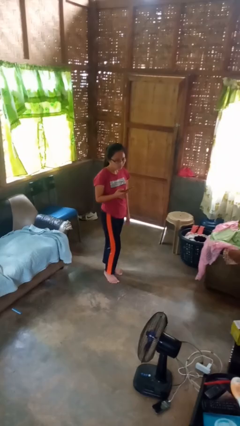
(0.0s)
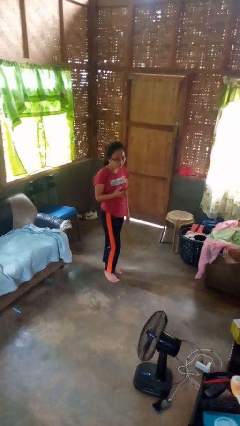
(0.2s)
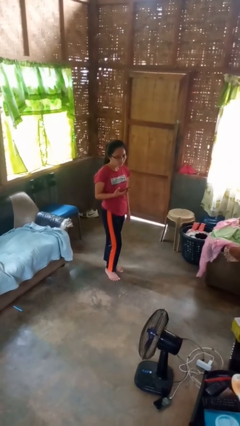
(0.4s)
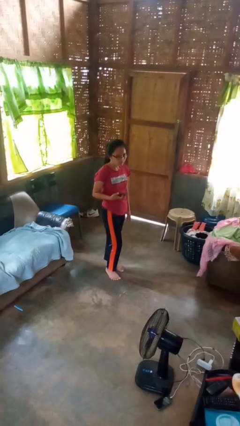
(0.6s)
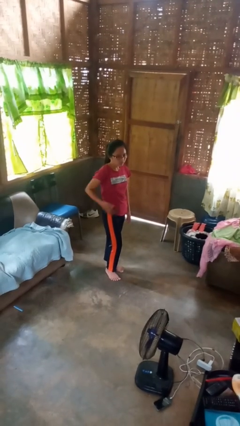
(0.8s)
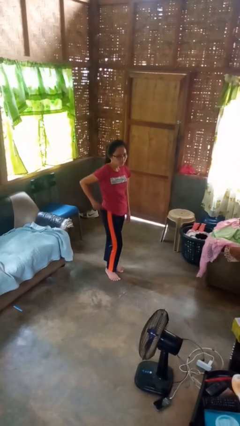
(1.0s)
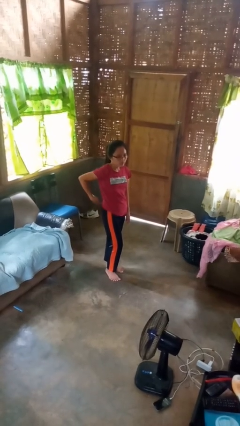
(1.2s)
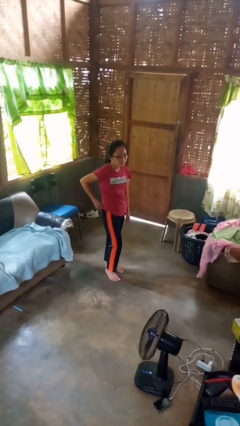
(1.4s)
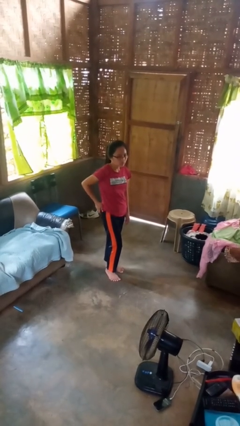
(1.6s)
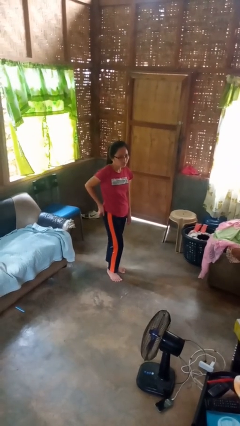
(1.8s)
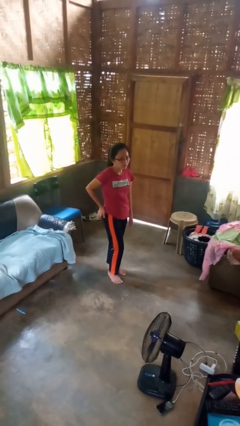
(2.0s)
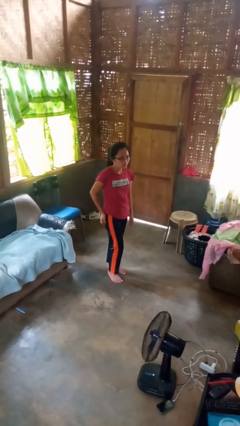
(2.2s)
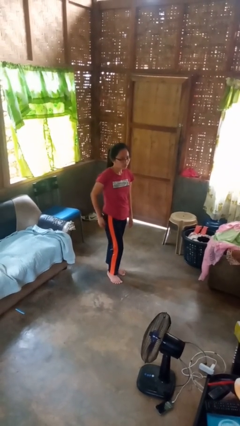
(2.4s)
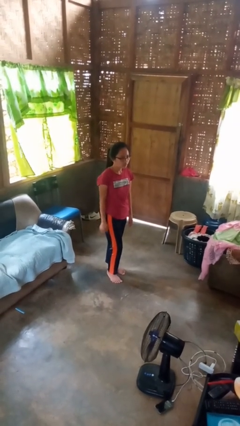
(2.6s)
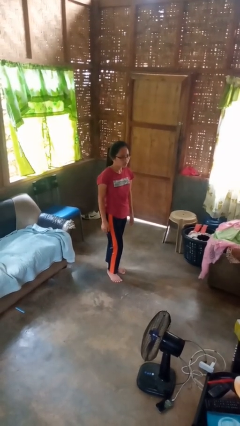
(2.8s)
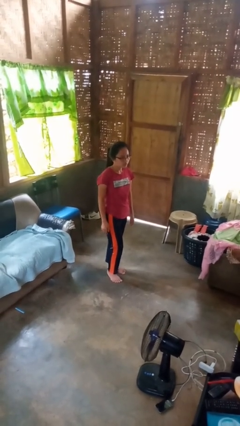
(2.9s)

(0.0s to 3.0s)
person puts phone into pocket

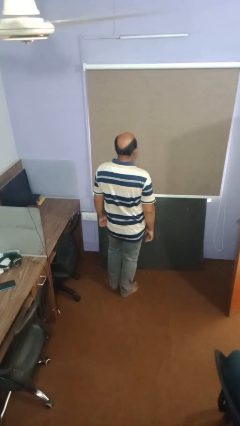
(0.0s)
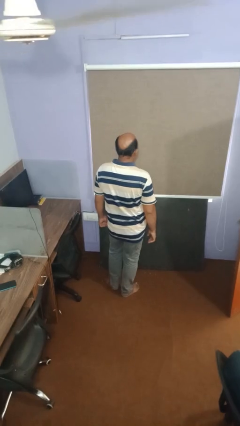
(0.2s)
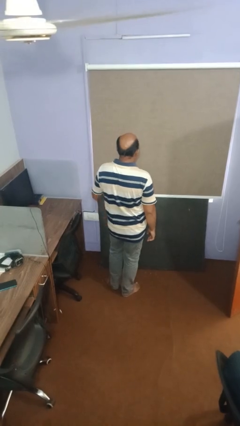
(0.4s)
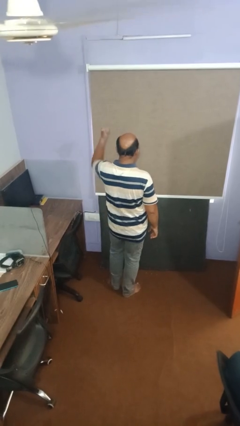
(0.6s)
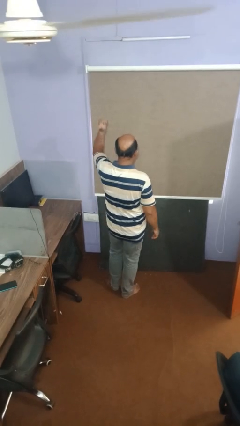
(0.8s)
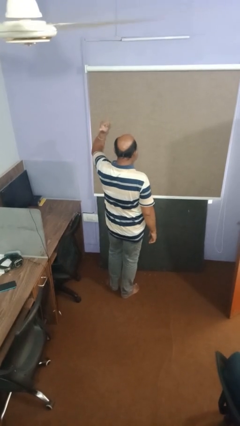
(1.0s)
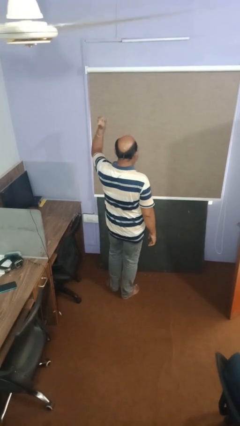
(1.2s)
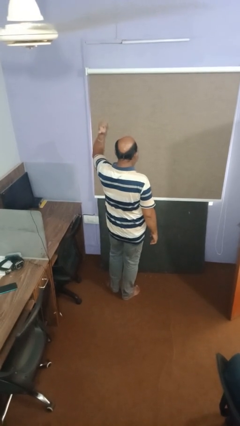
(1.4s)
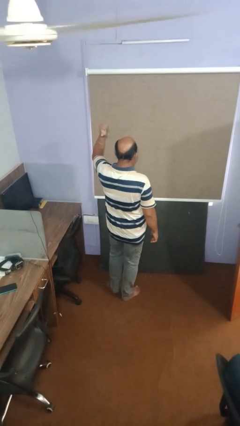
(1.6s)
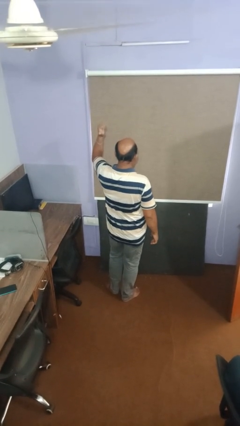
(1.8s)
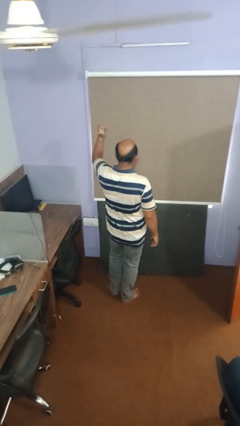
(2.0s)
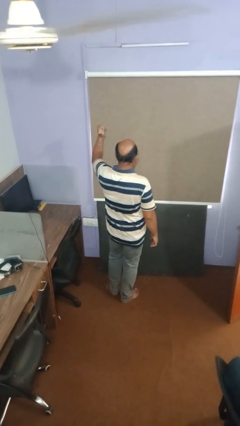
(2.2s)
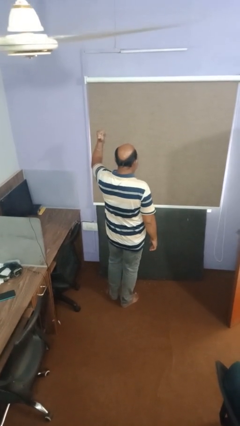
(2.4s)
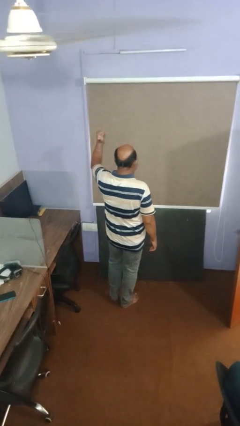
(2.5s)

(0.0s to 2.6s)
person gestures thumbs up

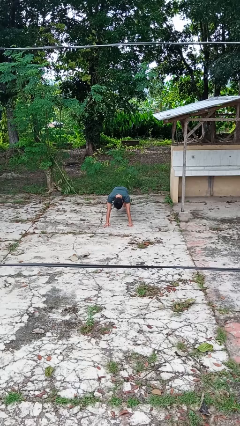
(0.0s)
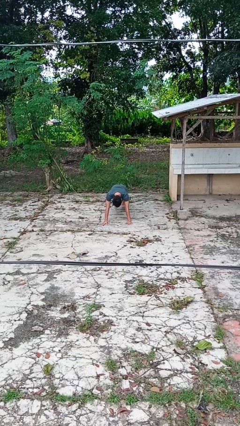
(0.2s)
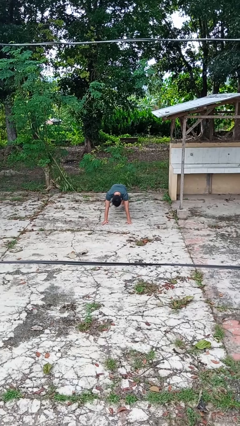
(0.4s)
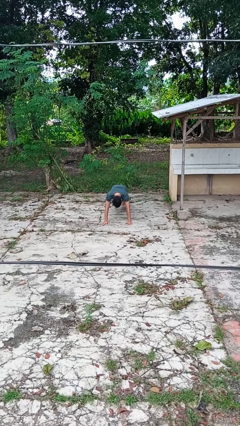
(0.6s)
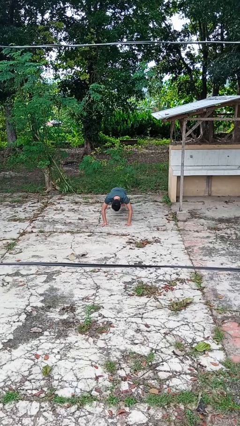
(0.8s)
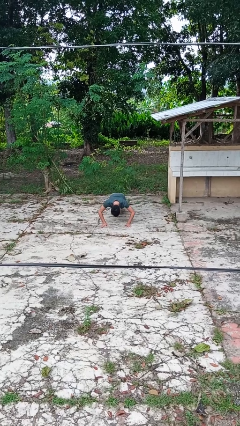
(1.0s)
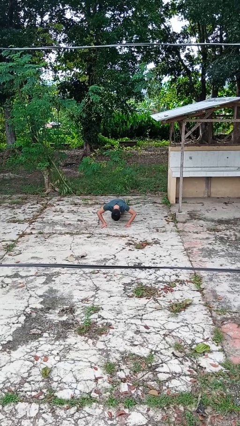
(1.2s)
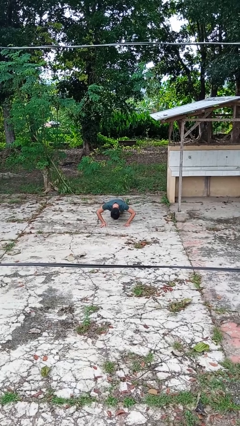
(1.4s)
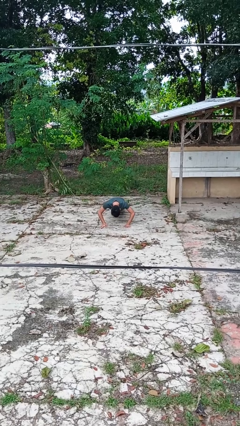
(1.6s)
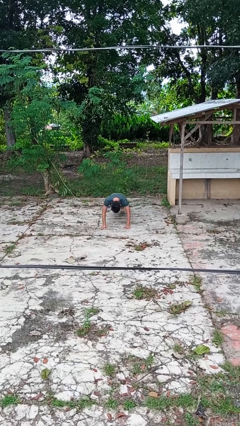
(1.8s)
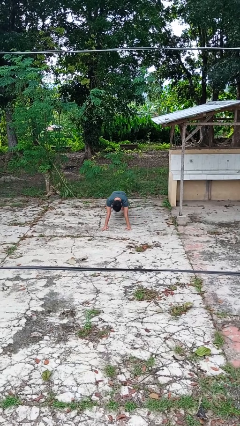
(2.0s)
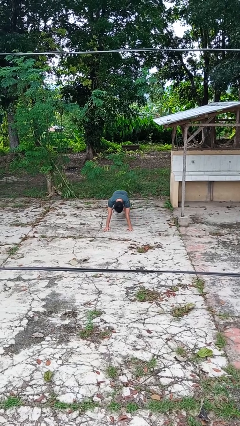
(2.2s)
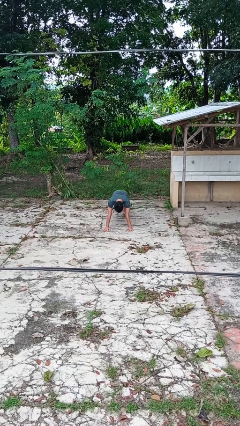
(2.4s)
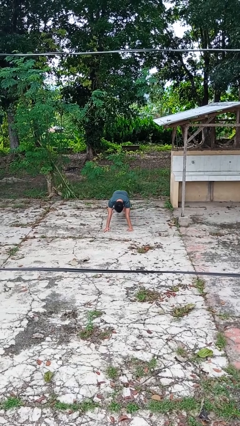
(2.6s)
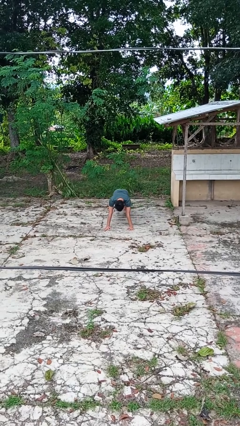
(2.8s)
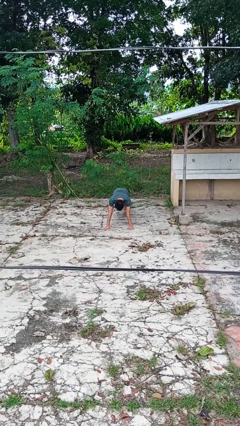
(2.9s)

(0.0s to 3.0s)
person exercises with pushup

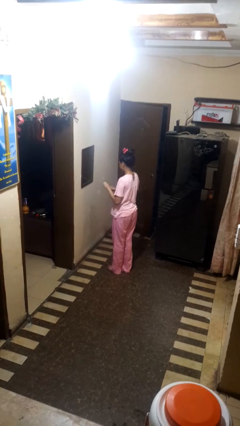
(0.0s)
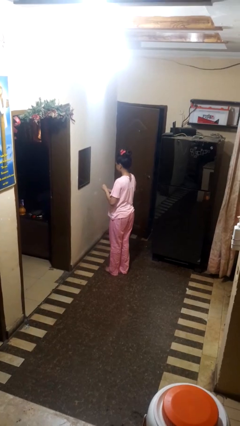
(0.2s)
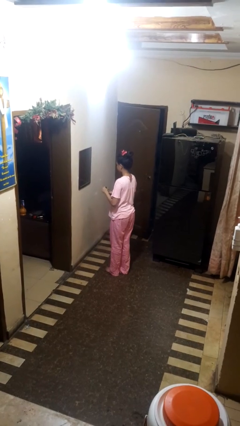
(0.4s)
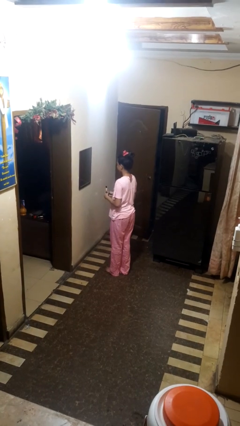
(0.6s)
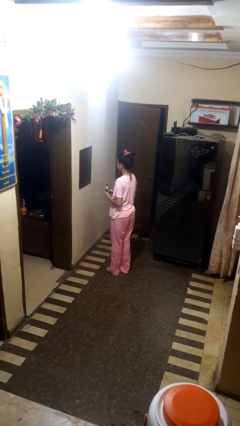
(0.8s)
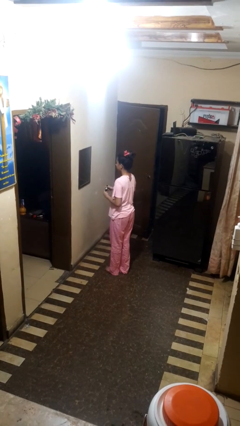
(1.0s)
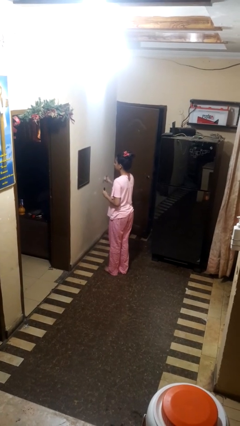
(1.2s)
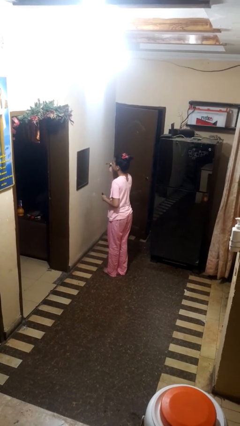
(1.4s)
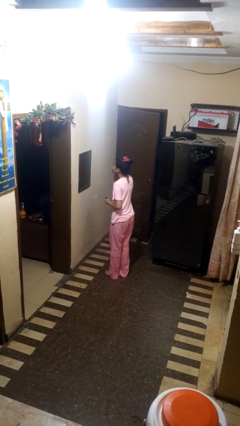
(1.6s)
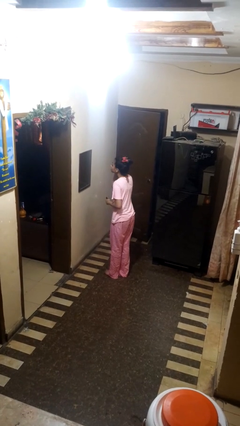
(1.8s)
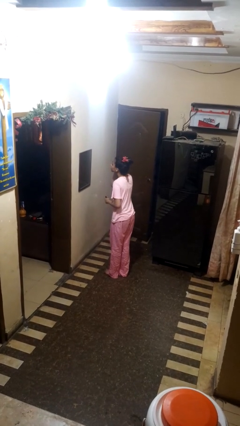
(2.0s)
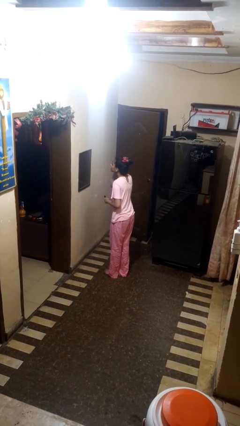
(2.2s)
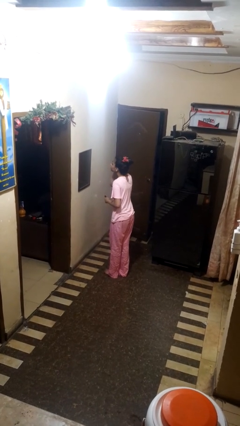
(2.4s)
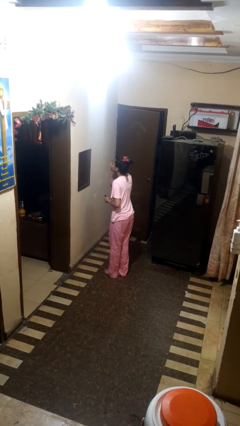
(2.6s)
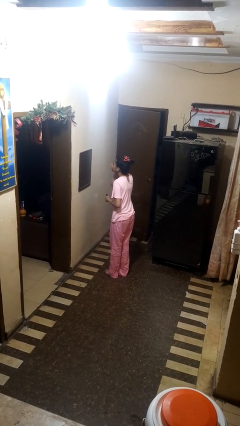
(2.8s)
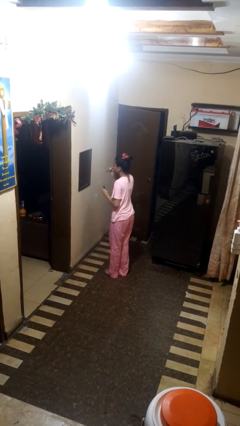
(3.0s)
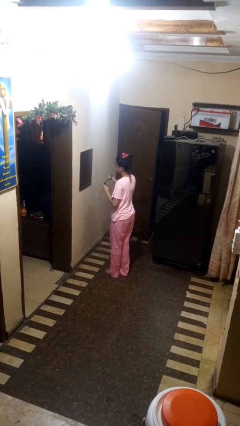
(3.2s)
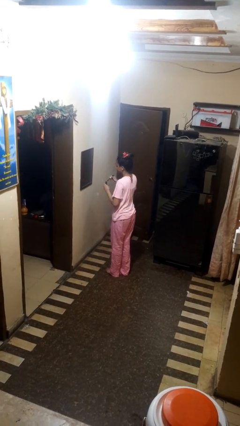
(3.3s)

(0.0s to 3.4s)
person applies eye makeup

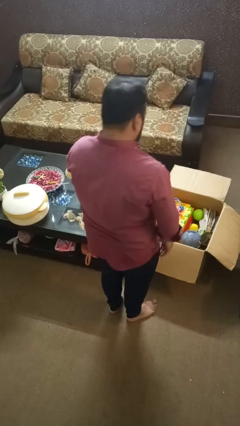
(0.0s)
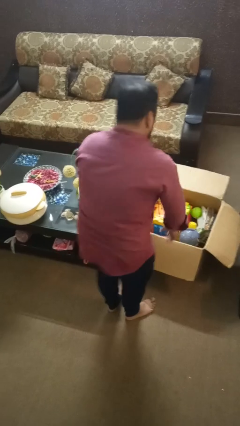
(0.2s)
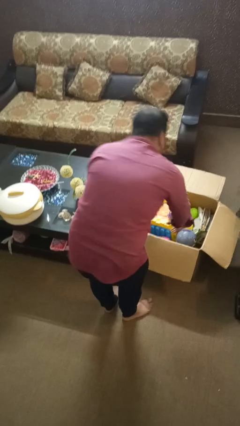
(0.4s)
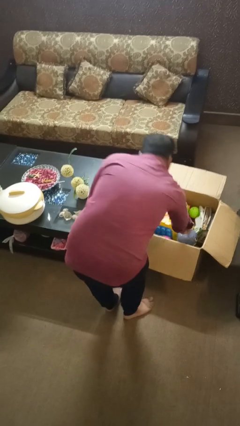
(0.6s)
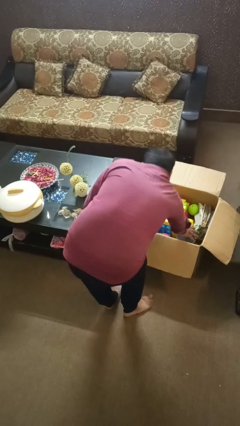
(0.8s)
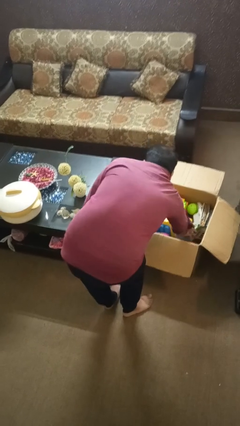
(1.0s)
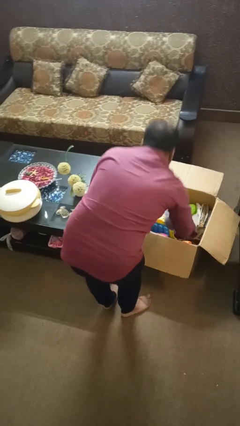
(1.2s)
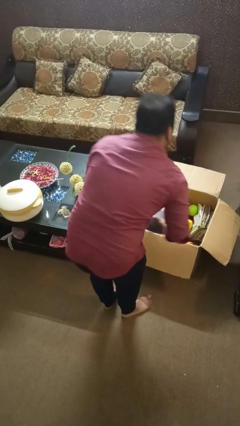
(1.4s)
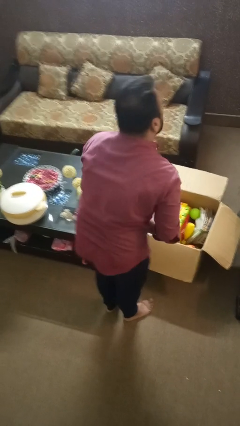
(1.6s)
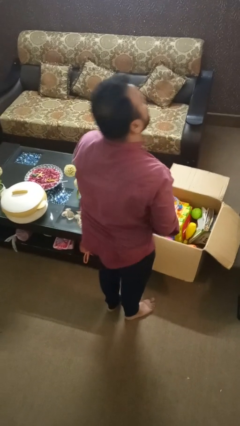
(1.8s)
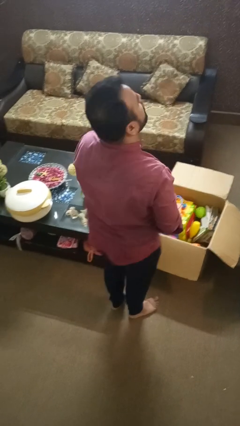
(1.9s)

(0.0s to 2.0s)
person takes object from box

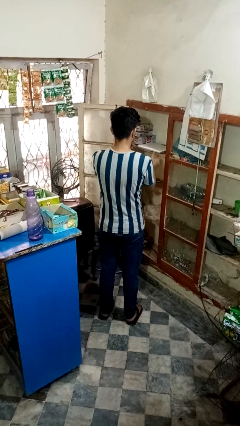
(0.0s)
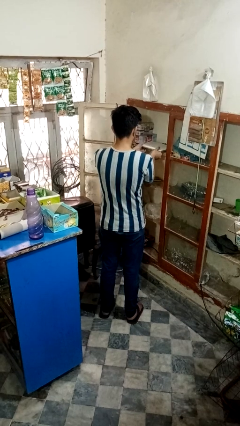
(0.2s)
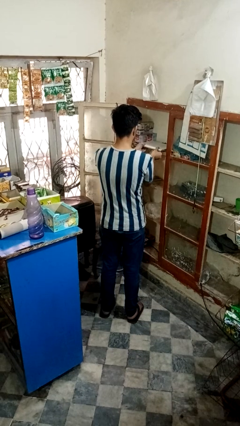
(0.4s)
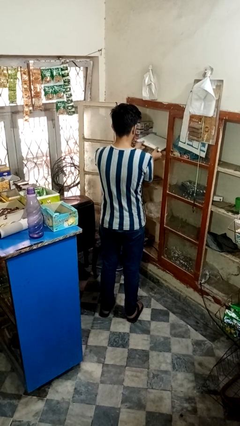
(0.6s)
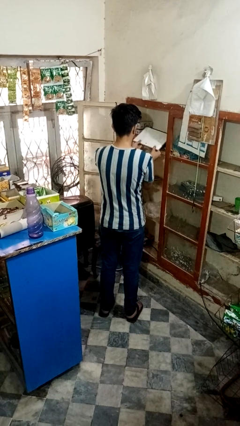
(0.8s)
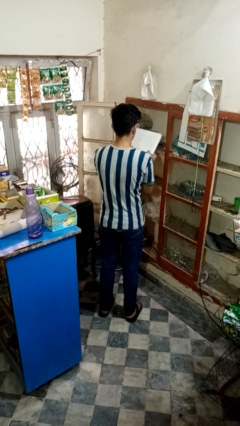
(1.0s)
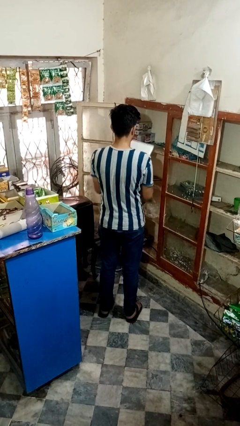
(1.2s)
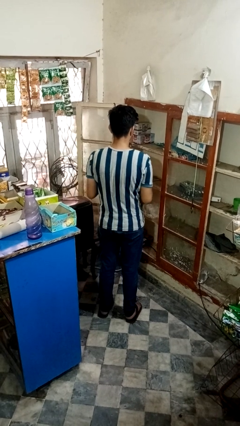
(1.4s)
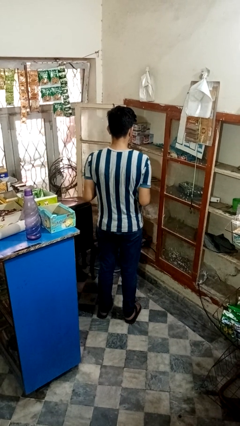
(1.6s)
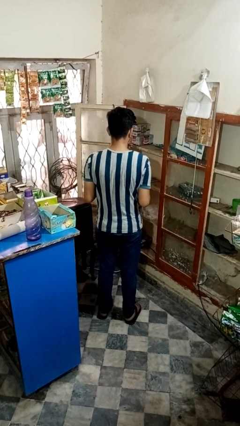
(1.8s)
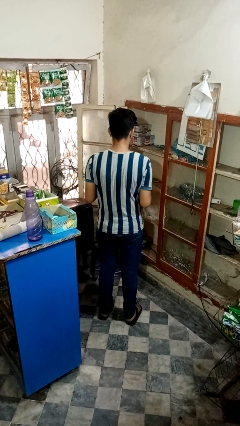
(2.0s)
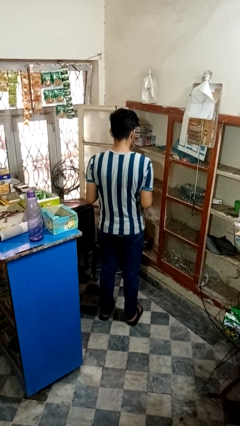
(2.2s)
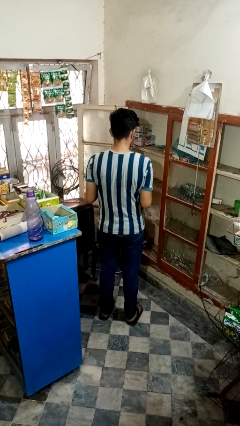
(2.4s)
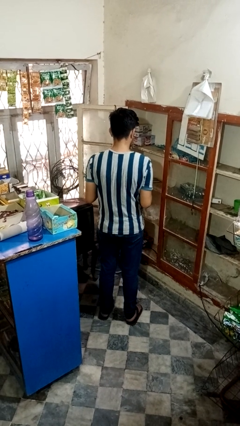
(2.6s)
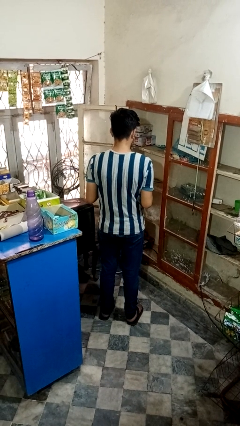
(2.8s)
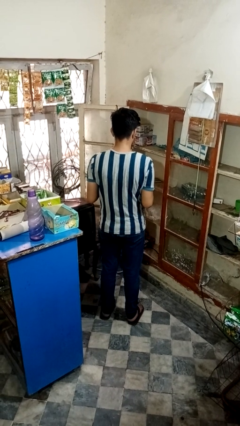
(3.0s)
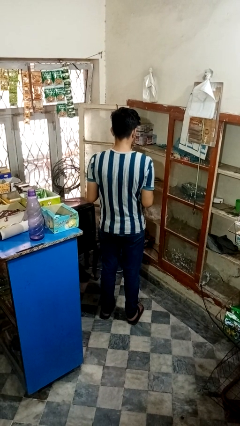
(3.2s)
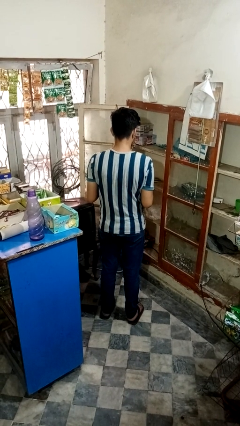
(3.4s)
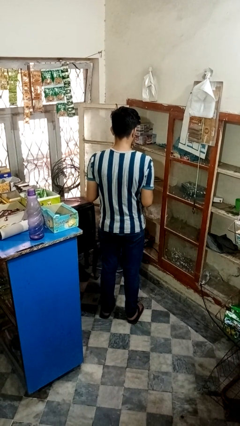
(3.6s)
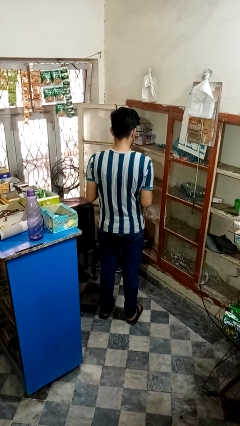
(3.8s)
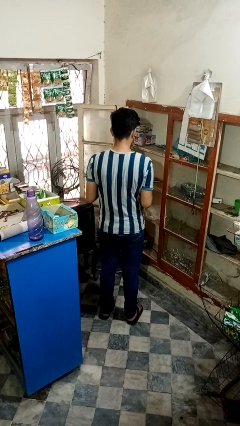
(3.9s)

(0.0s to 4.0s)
person picks up object from cabinet
